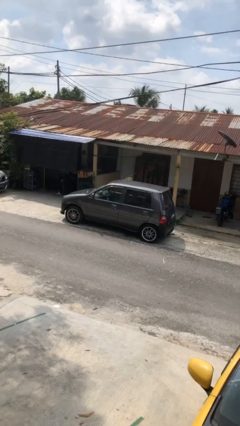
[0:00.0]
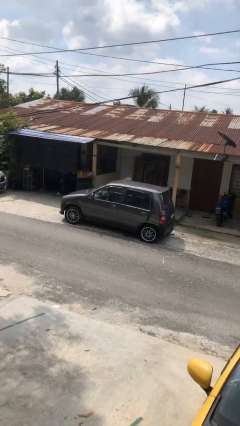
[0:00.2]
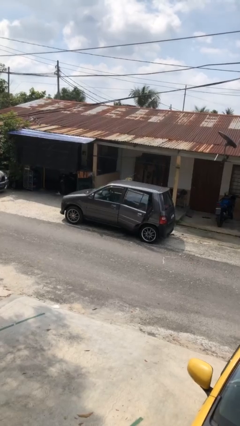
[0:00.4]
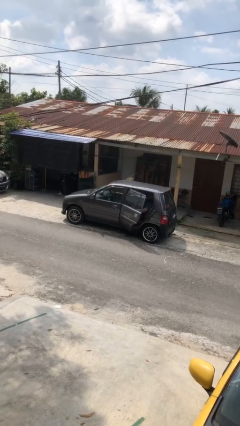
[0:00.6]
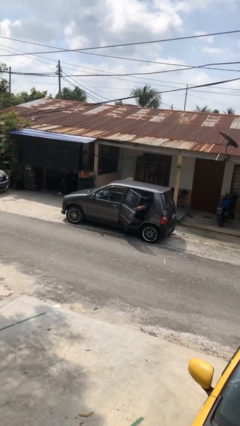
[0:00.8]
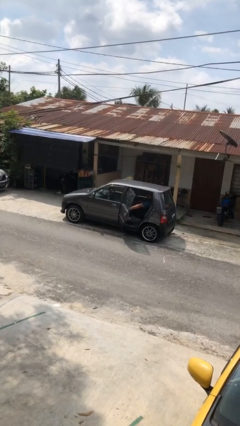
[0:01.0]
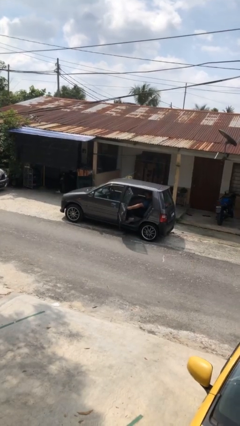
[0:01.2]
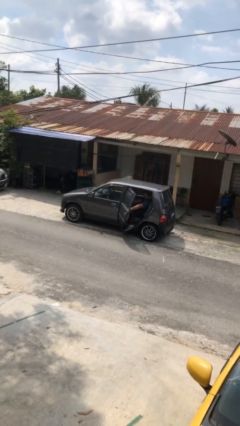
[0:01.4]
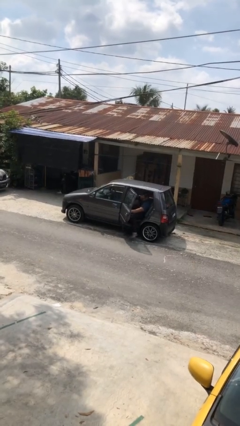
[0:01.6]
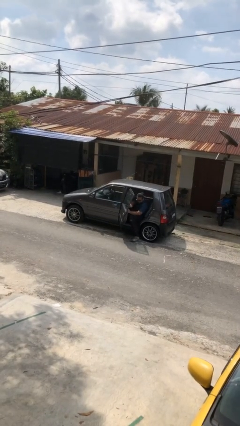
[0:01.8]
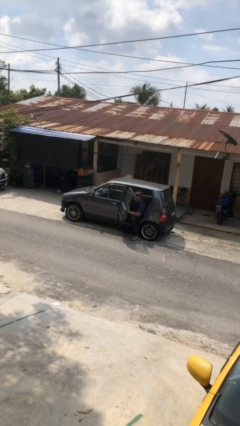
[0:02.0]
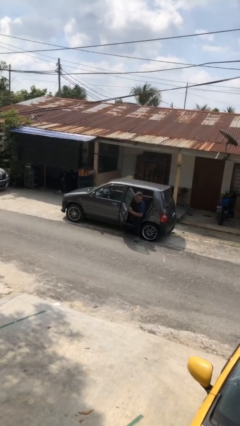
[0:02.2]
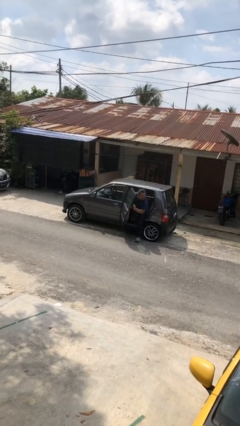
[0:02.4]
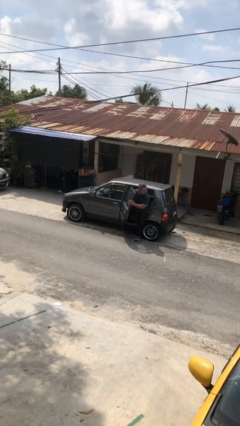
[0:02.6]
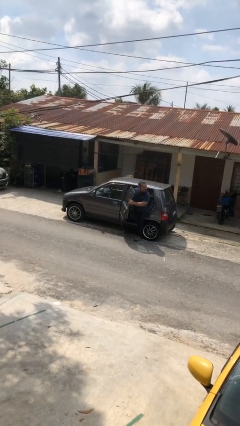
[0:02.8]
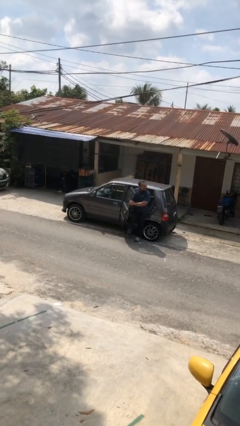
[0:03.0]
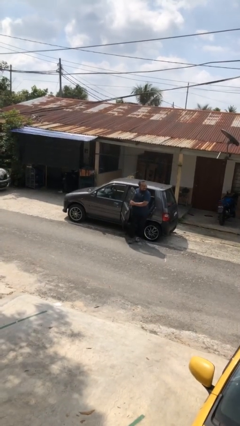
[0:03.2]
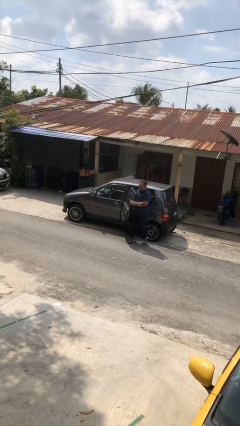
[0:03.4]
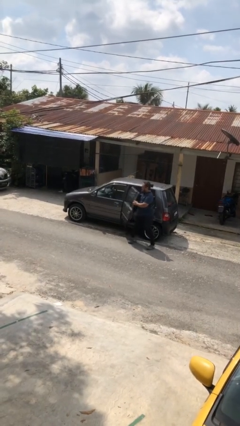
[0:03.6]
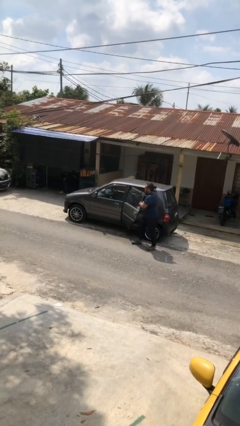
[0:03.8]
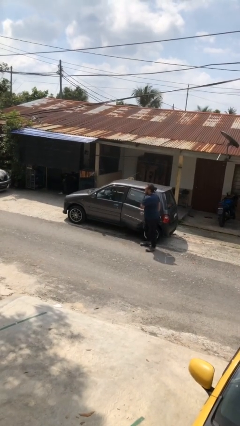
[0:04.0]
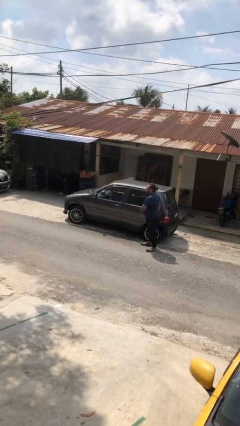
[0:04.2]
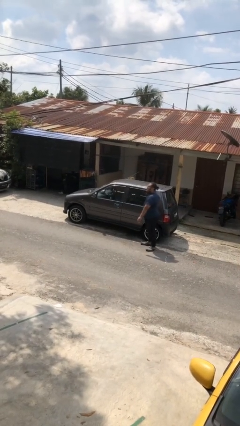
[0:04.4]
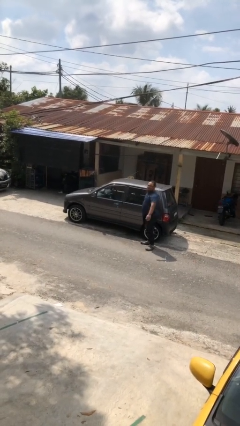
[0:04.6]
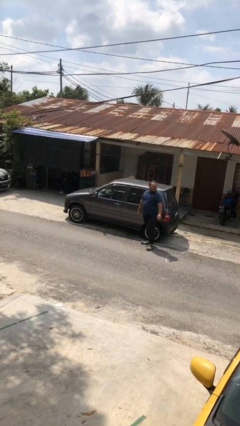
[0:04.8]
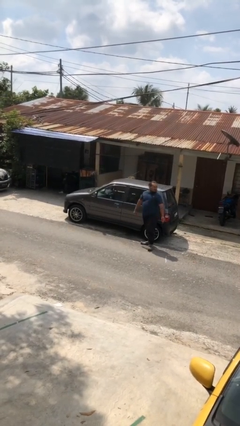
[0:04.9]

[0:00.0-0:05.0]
car drops off person

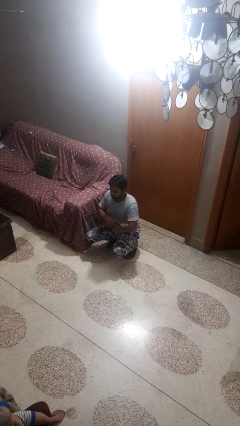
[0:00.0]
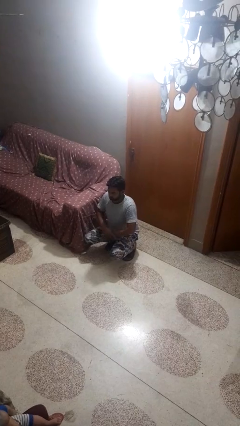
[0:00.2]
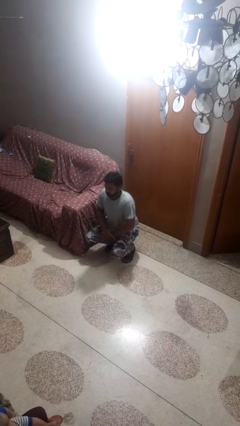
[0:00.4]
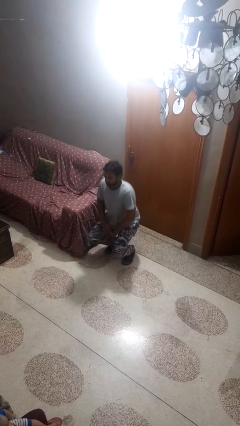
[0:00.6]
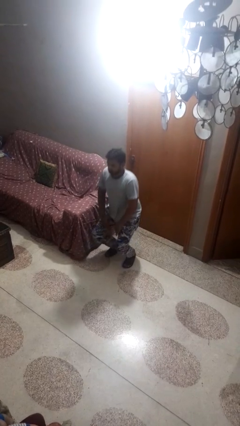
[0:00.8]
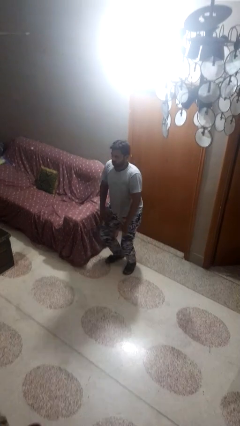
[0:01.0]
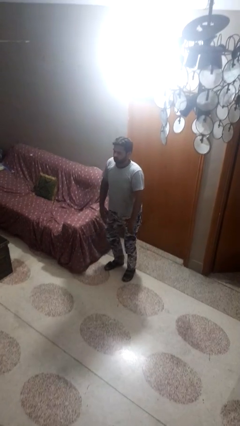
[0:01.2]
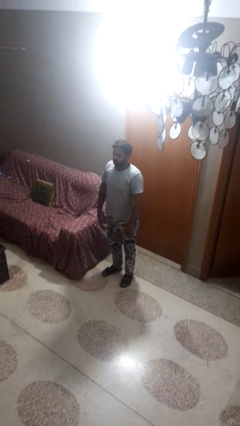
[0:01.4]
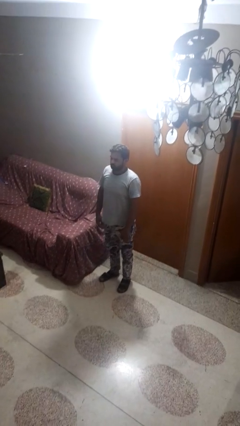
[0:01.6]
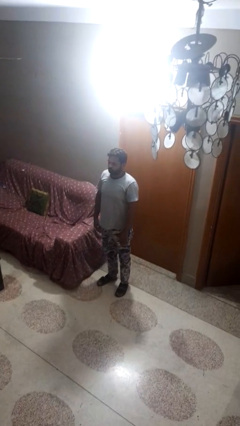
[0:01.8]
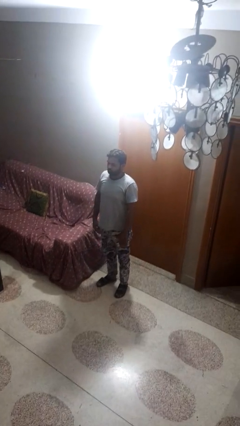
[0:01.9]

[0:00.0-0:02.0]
person stands up

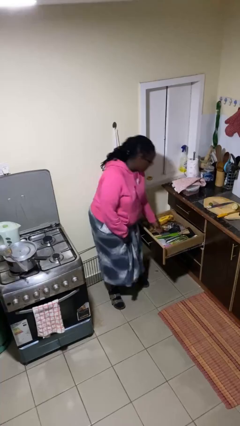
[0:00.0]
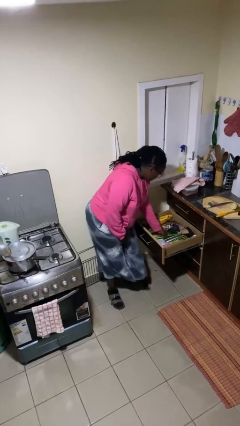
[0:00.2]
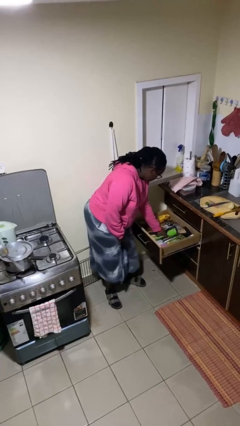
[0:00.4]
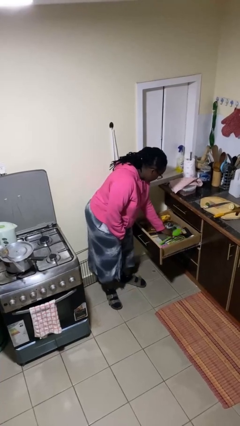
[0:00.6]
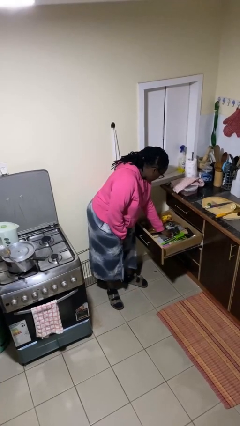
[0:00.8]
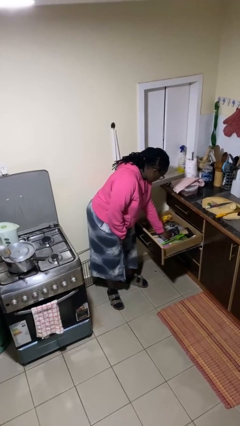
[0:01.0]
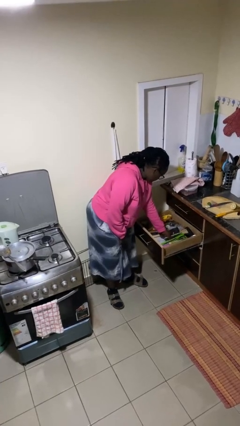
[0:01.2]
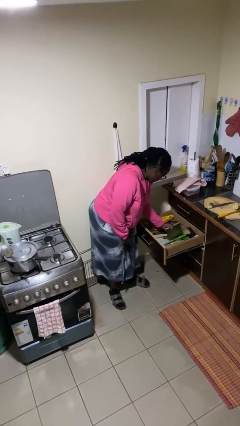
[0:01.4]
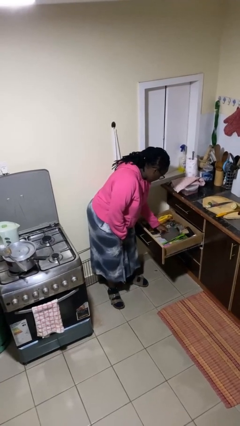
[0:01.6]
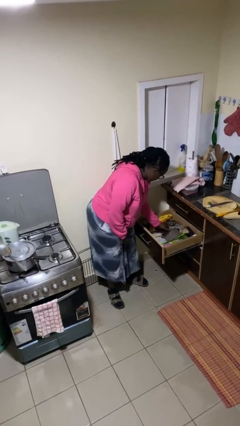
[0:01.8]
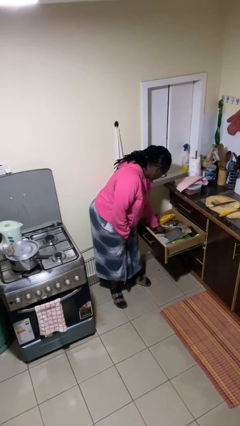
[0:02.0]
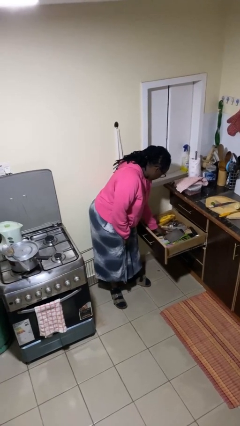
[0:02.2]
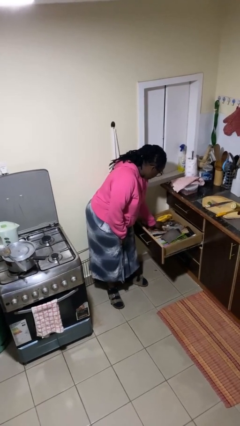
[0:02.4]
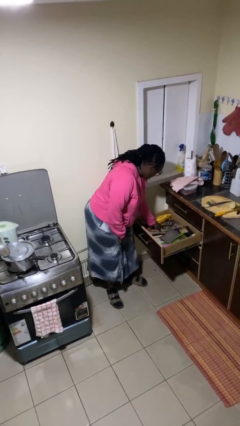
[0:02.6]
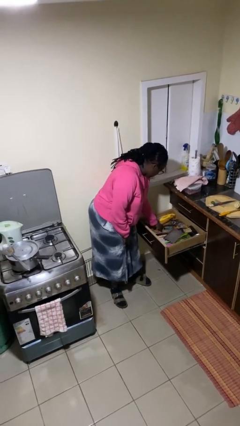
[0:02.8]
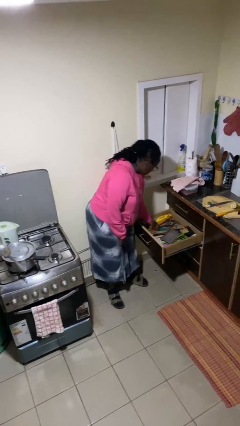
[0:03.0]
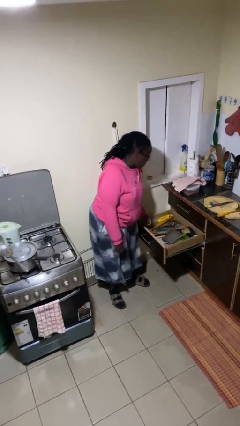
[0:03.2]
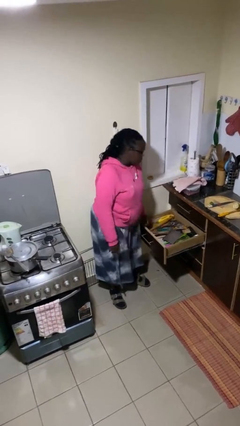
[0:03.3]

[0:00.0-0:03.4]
person searches in kitchen drawer

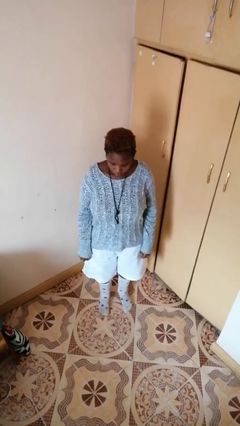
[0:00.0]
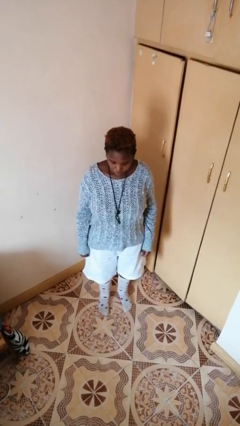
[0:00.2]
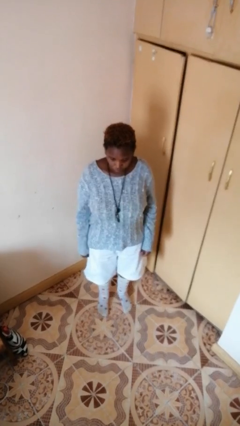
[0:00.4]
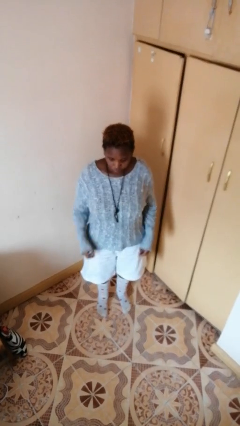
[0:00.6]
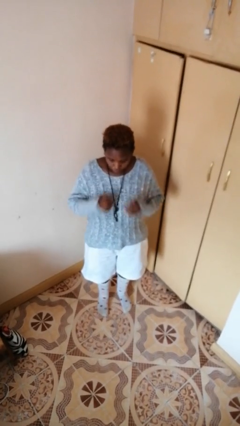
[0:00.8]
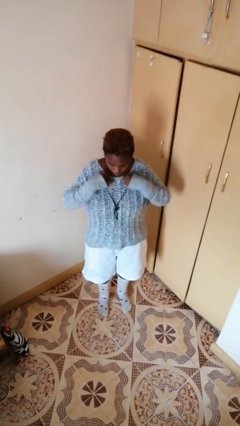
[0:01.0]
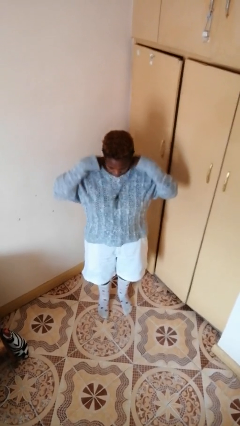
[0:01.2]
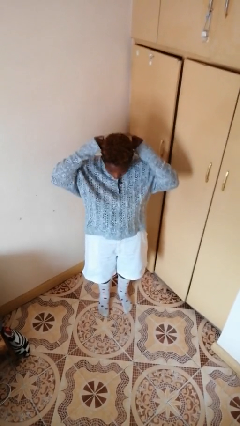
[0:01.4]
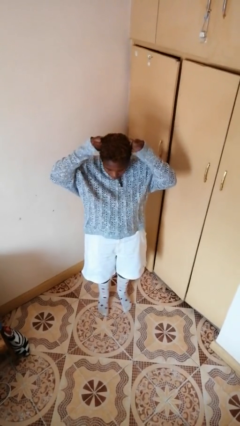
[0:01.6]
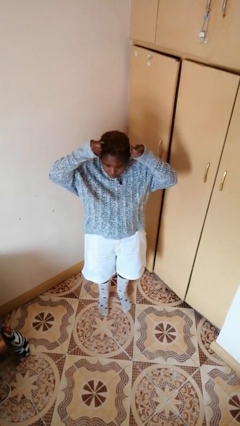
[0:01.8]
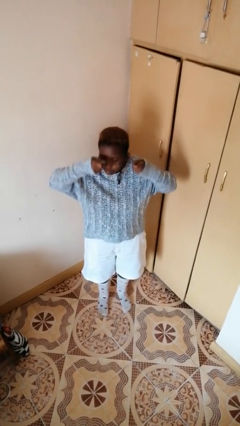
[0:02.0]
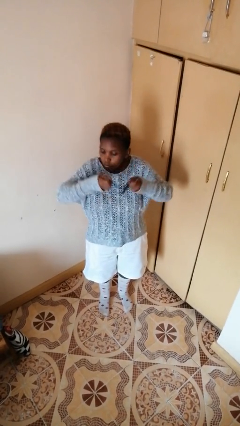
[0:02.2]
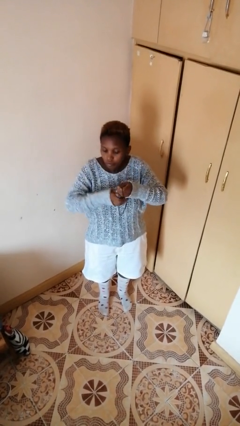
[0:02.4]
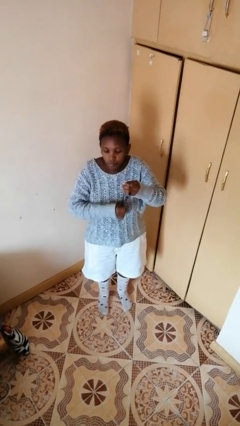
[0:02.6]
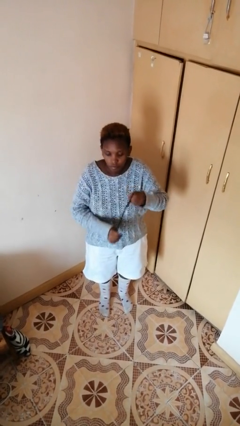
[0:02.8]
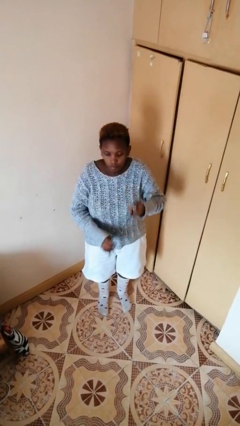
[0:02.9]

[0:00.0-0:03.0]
person takes off necklace

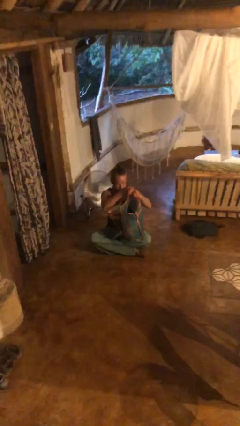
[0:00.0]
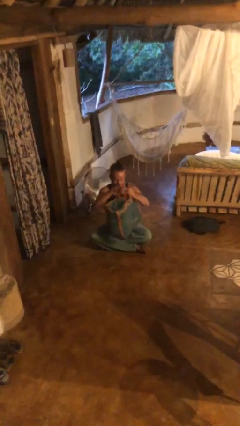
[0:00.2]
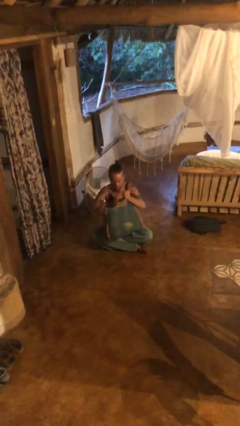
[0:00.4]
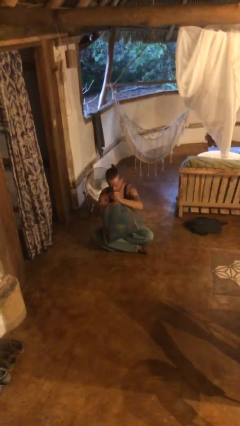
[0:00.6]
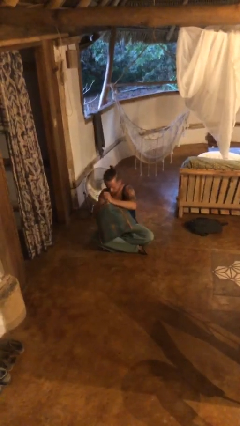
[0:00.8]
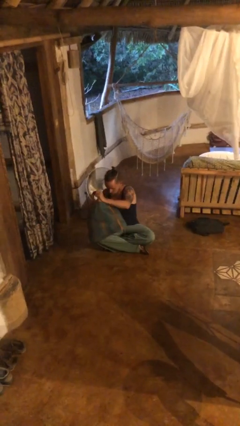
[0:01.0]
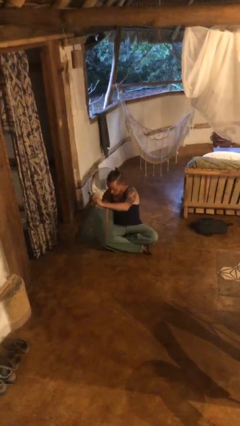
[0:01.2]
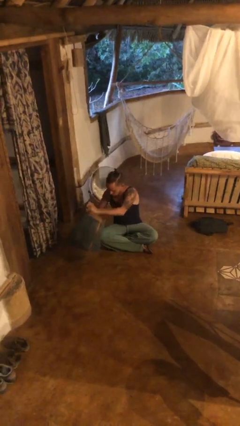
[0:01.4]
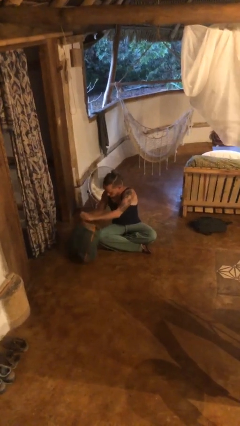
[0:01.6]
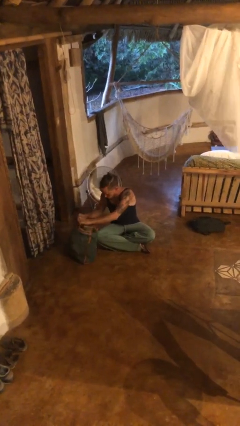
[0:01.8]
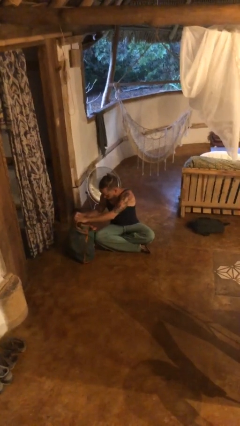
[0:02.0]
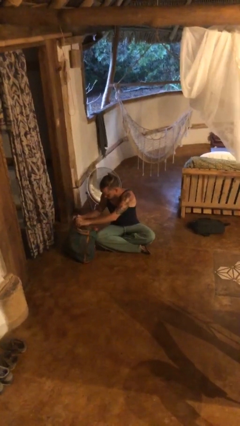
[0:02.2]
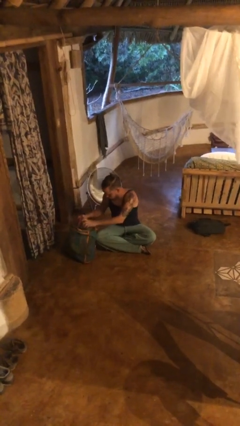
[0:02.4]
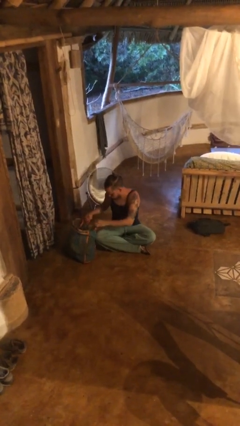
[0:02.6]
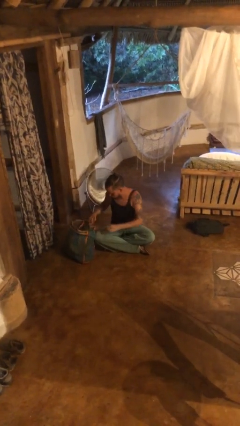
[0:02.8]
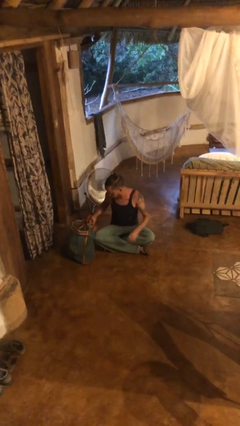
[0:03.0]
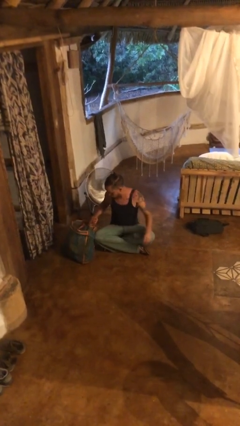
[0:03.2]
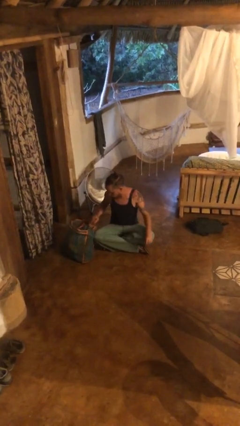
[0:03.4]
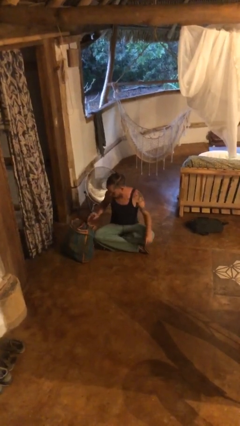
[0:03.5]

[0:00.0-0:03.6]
person puts down object on floor

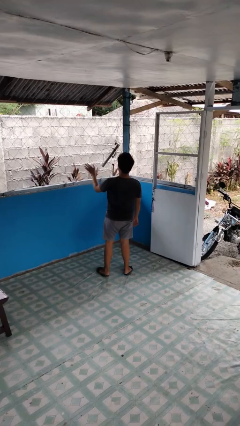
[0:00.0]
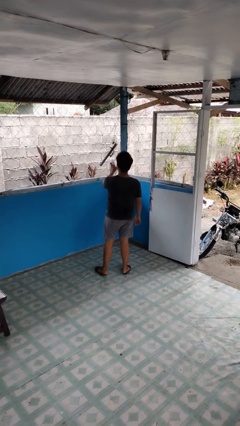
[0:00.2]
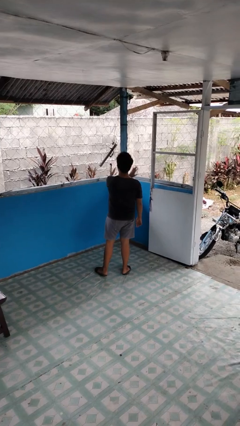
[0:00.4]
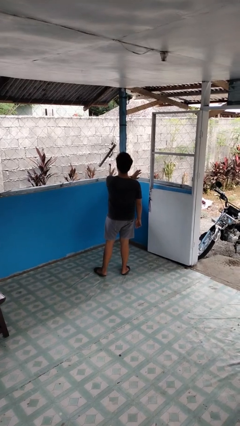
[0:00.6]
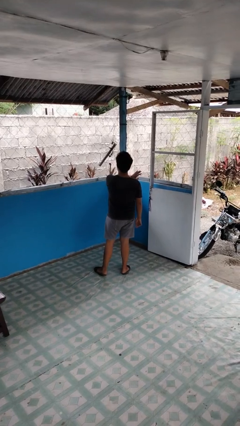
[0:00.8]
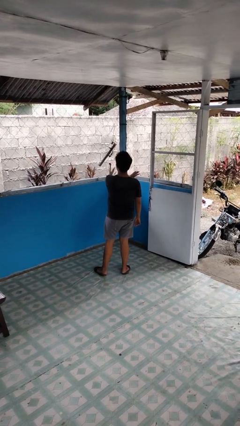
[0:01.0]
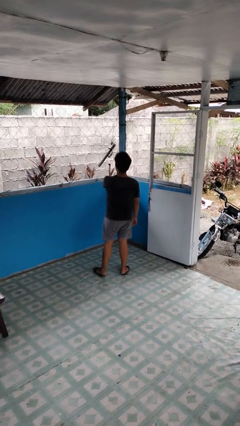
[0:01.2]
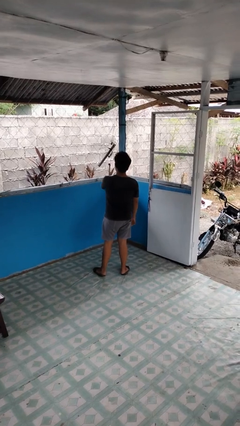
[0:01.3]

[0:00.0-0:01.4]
person gestures swipe right
